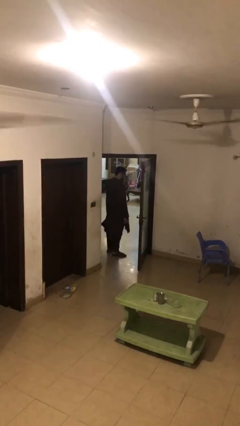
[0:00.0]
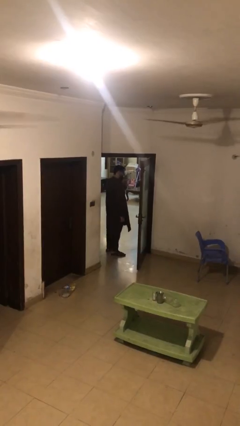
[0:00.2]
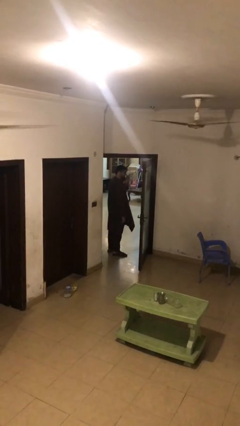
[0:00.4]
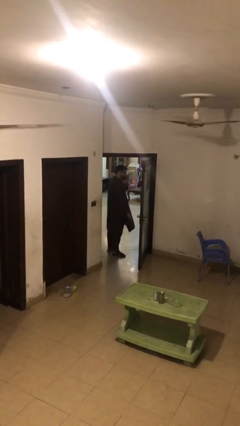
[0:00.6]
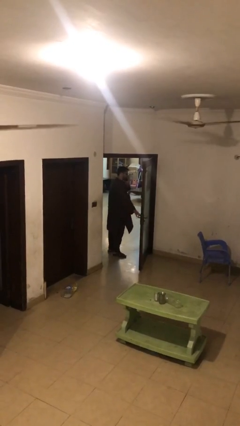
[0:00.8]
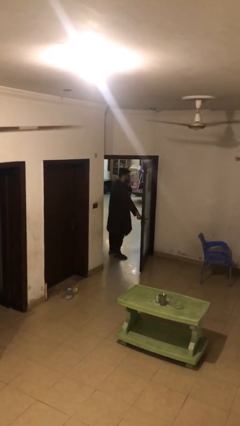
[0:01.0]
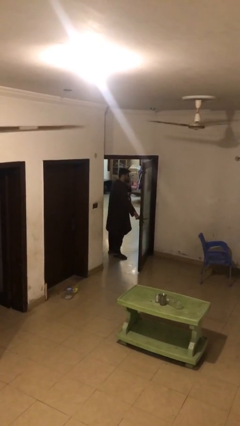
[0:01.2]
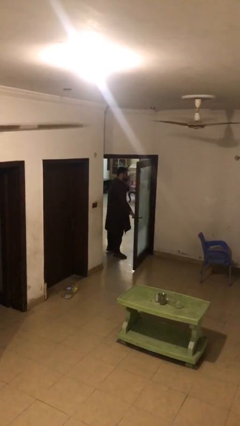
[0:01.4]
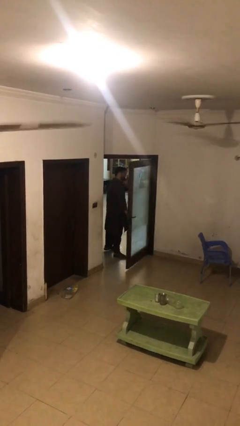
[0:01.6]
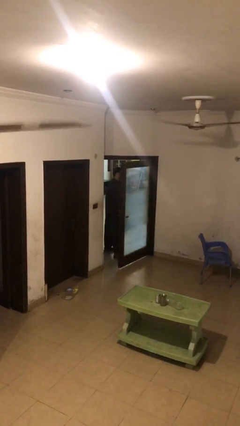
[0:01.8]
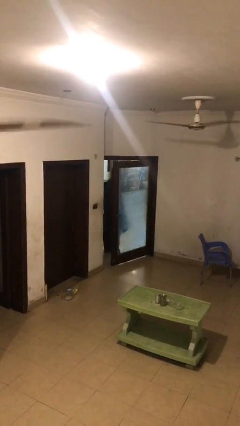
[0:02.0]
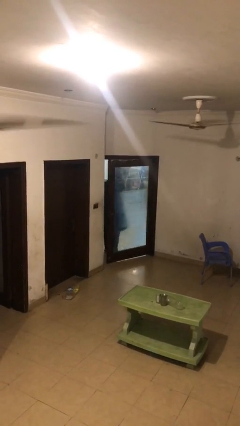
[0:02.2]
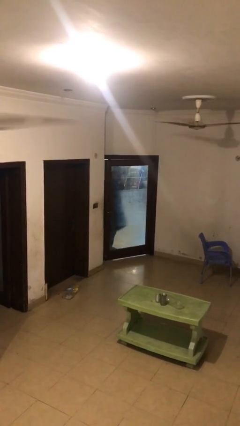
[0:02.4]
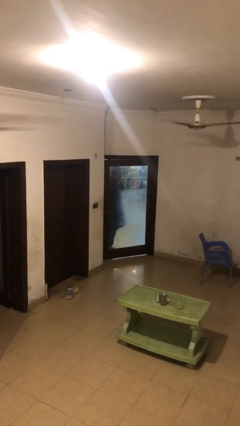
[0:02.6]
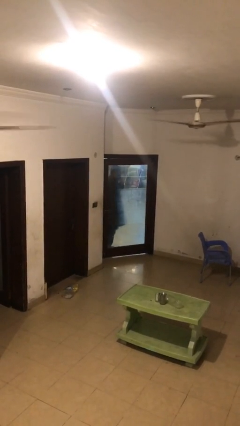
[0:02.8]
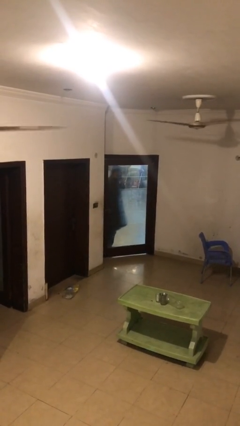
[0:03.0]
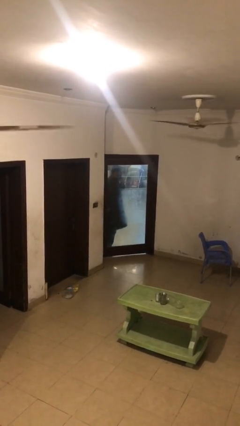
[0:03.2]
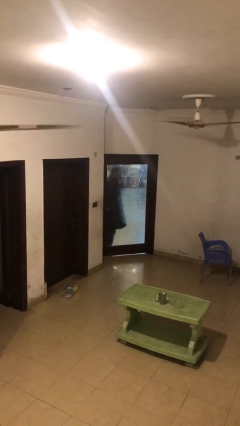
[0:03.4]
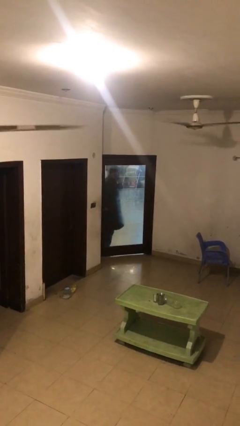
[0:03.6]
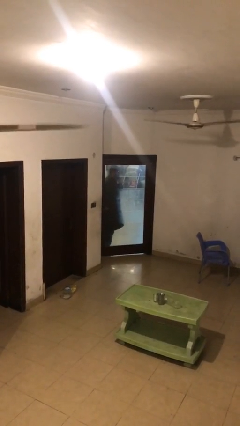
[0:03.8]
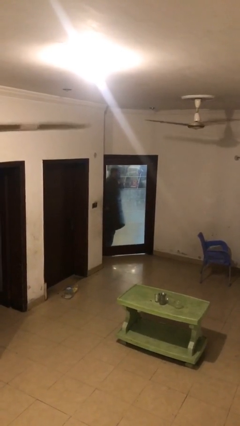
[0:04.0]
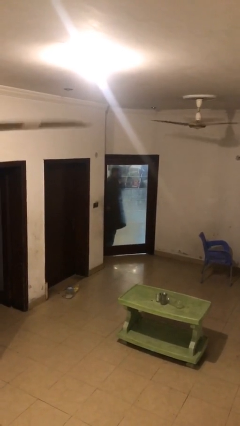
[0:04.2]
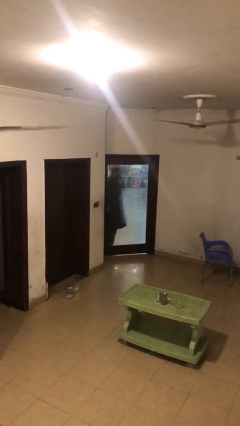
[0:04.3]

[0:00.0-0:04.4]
person closes facility door

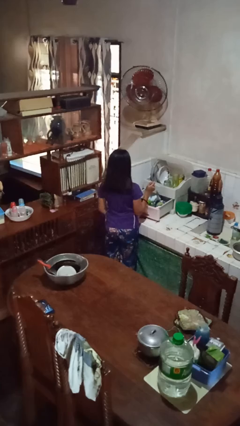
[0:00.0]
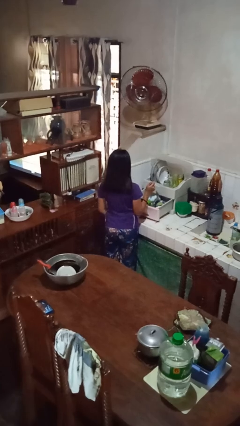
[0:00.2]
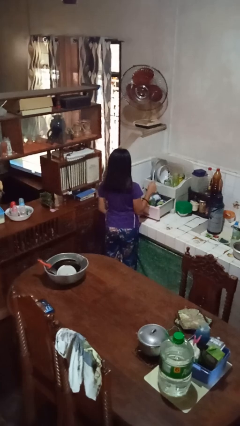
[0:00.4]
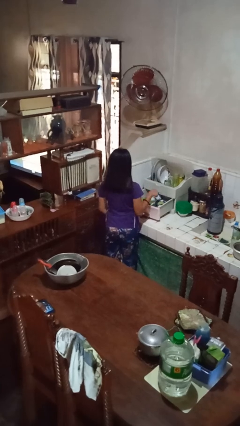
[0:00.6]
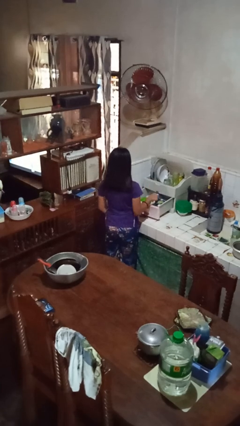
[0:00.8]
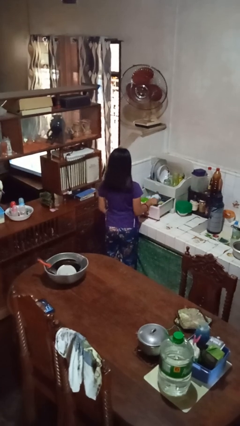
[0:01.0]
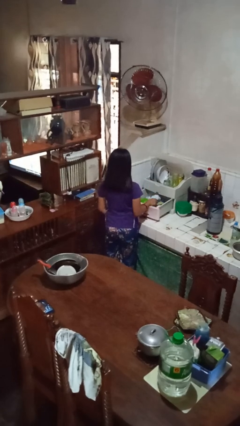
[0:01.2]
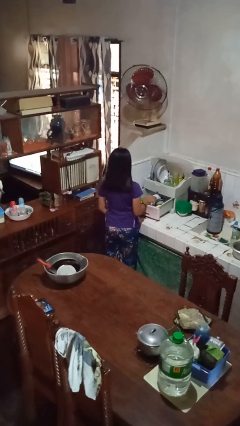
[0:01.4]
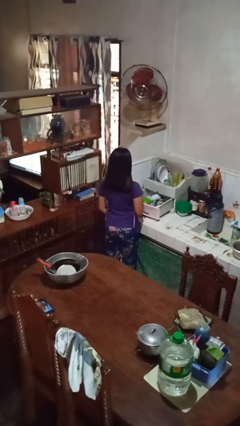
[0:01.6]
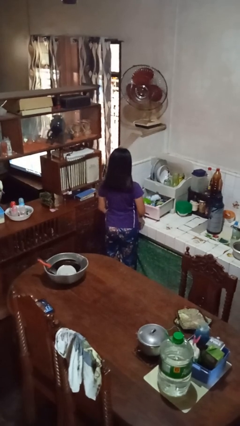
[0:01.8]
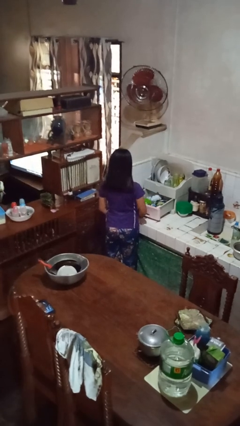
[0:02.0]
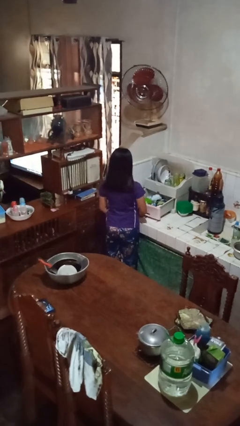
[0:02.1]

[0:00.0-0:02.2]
person puts object into kitchen drawer

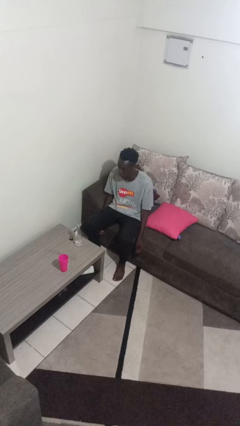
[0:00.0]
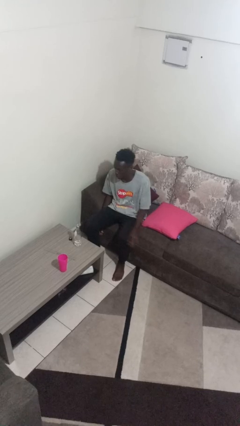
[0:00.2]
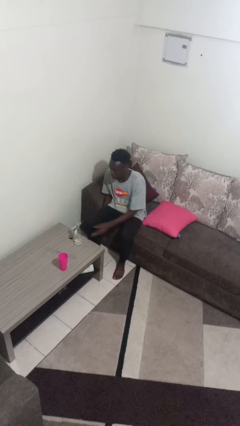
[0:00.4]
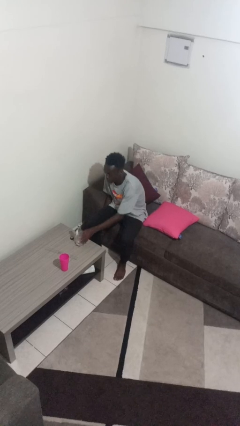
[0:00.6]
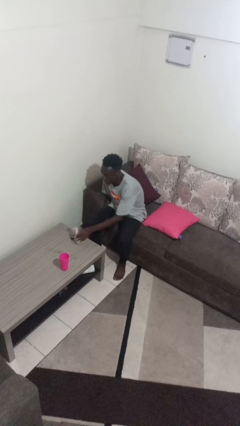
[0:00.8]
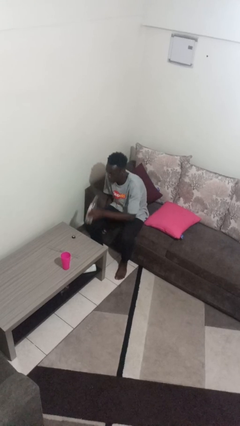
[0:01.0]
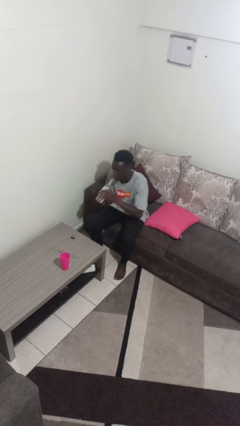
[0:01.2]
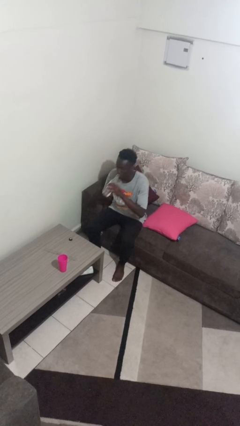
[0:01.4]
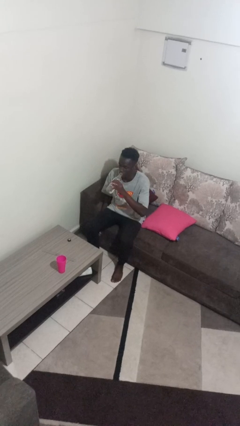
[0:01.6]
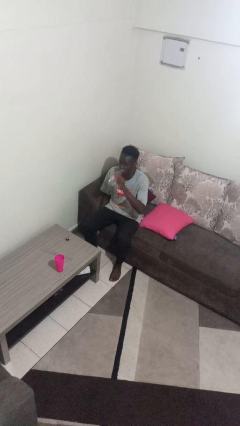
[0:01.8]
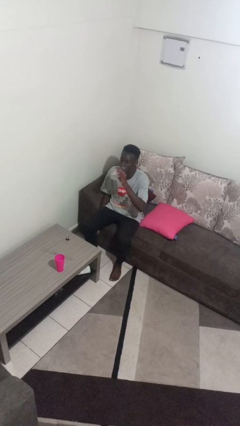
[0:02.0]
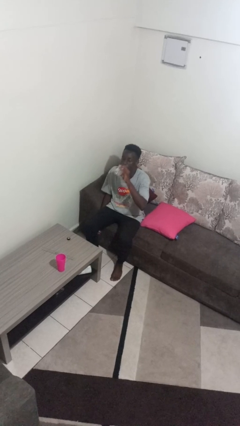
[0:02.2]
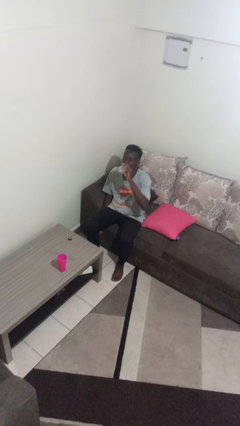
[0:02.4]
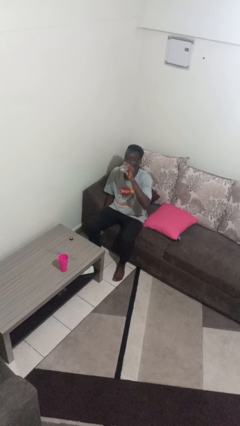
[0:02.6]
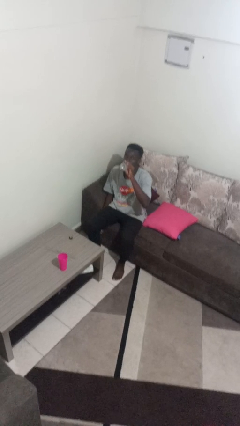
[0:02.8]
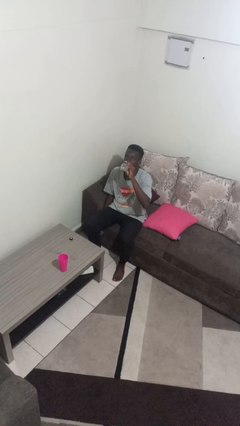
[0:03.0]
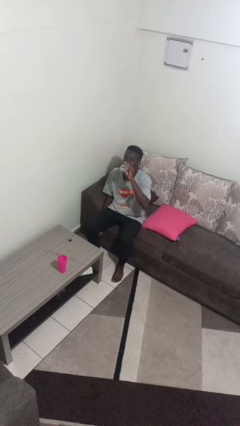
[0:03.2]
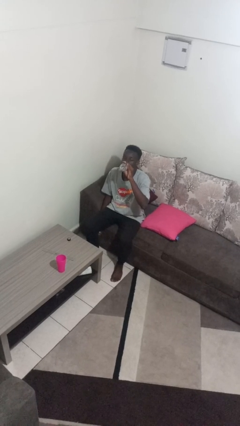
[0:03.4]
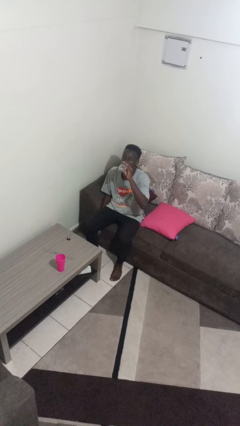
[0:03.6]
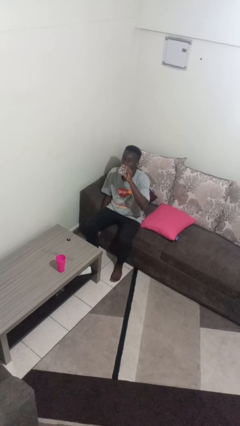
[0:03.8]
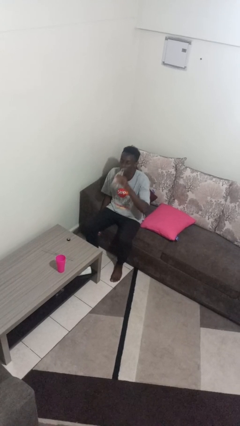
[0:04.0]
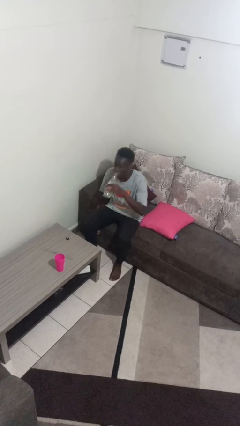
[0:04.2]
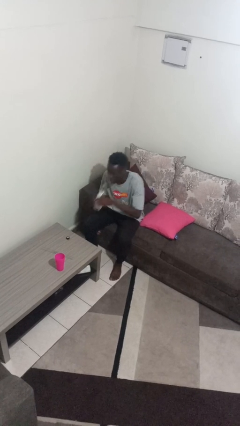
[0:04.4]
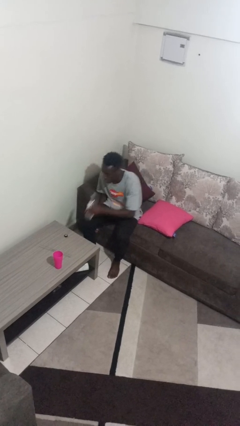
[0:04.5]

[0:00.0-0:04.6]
person drinks from bottle

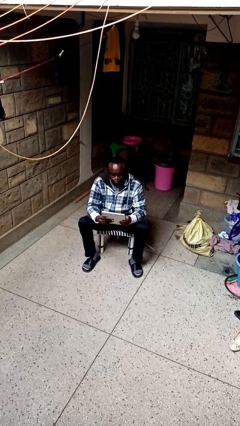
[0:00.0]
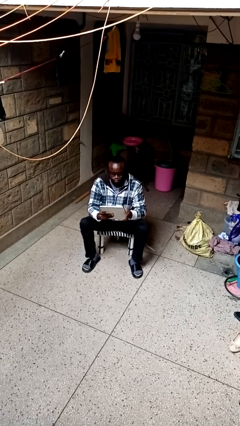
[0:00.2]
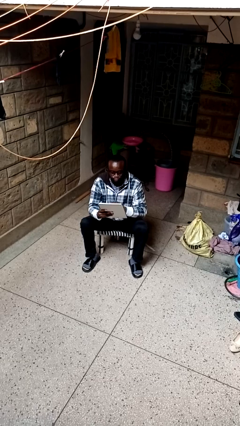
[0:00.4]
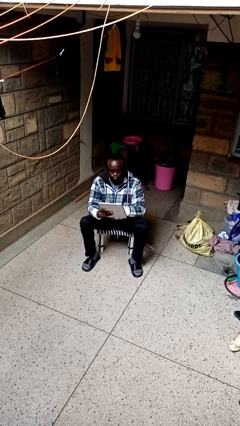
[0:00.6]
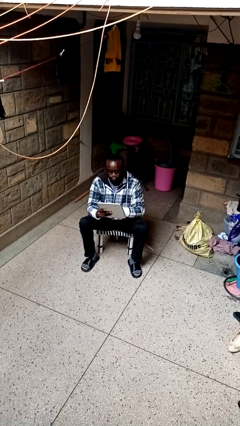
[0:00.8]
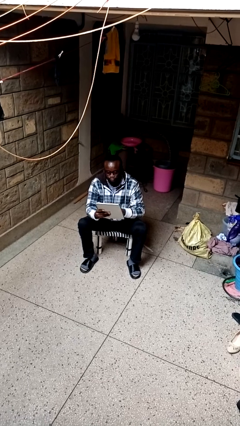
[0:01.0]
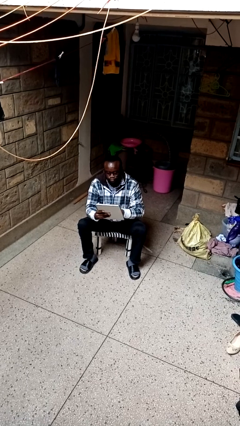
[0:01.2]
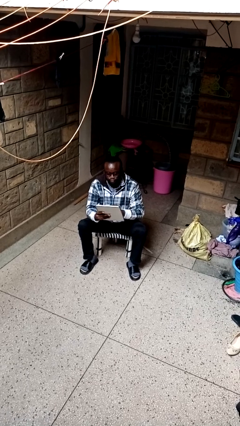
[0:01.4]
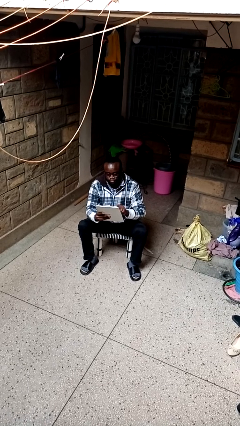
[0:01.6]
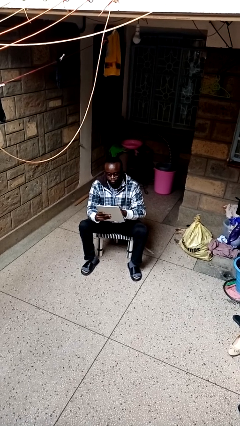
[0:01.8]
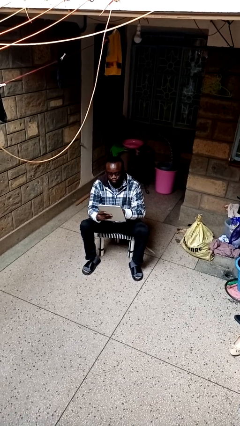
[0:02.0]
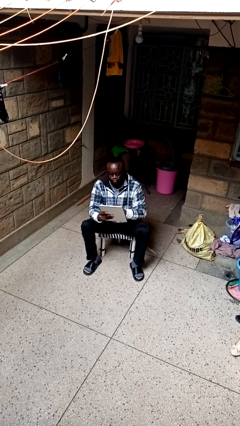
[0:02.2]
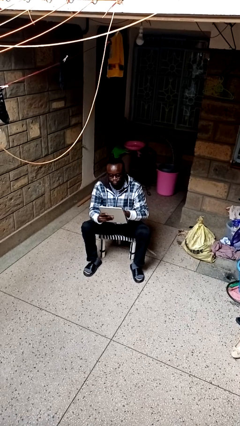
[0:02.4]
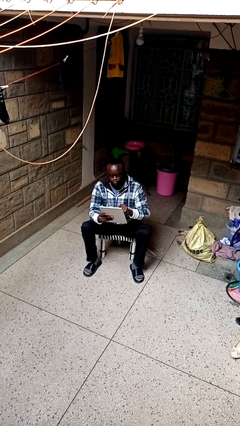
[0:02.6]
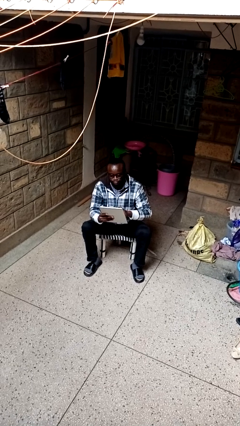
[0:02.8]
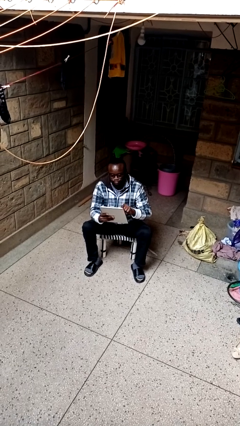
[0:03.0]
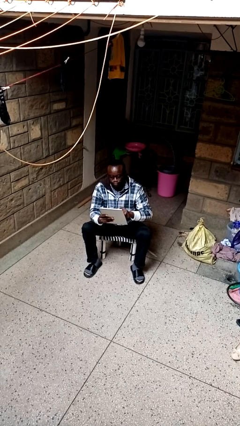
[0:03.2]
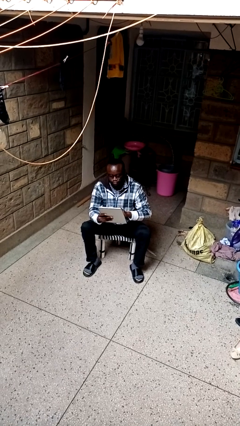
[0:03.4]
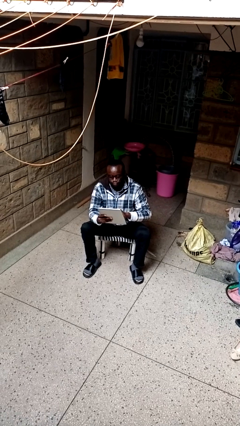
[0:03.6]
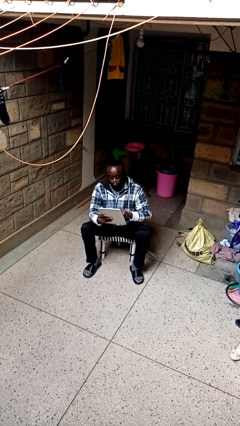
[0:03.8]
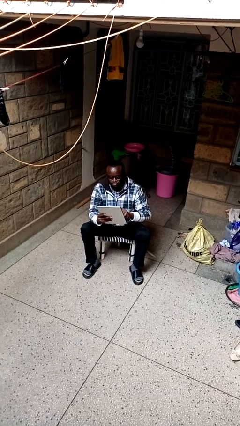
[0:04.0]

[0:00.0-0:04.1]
person interacts with tablet

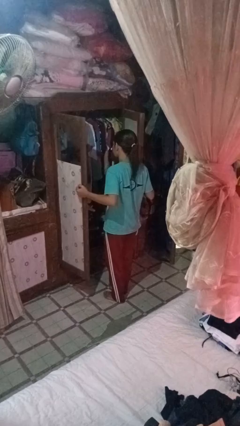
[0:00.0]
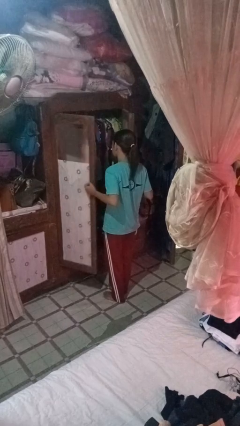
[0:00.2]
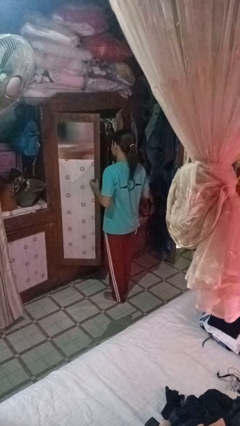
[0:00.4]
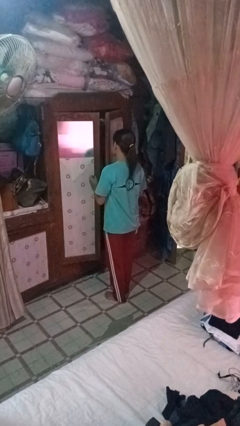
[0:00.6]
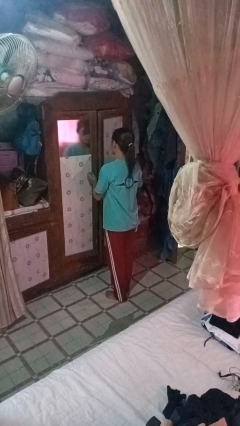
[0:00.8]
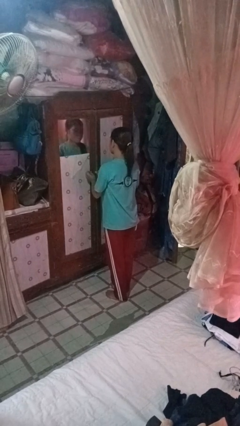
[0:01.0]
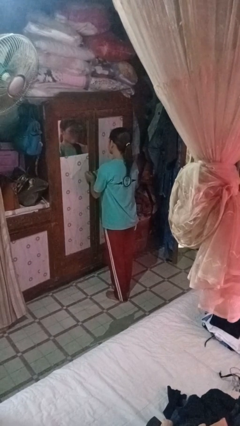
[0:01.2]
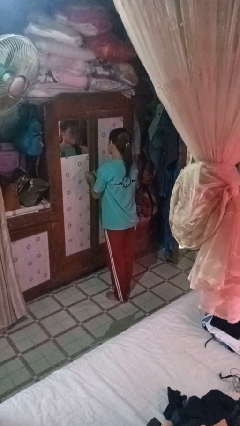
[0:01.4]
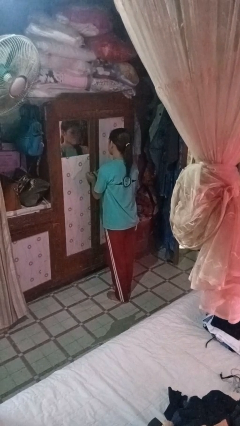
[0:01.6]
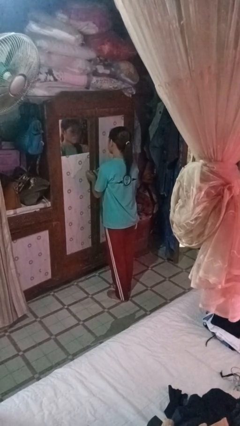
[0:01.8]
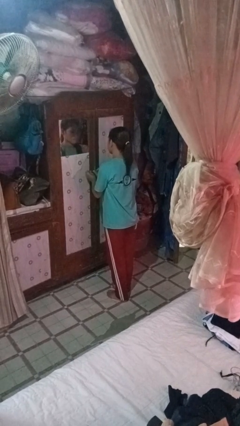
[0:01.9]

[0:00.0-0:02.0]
person closes closet door
